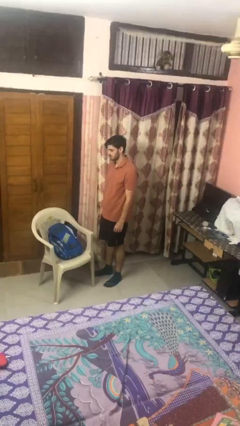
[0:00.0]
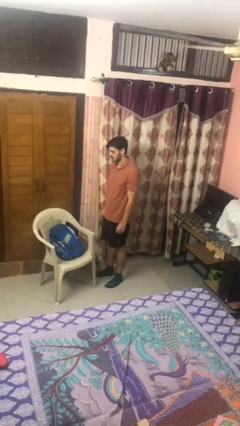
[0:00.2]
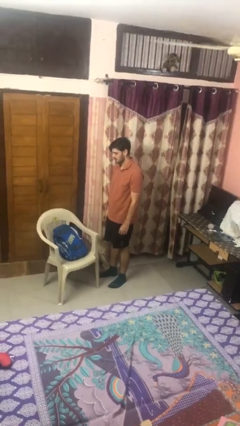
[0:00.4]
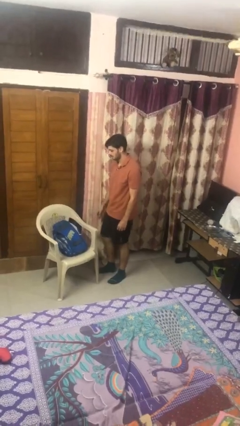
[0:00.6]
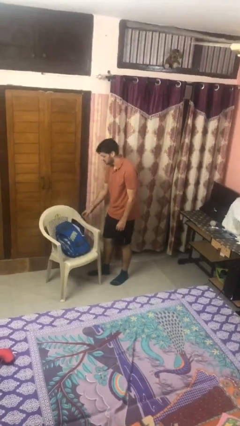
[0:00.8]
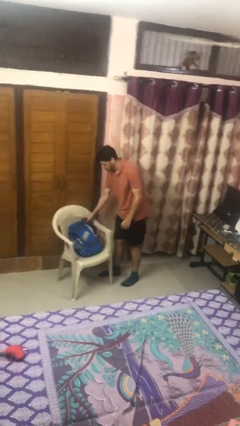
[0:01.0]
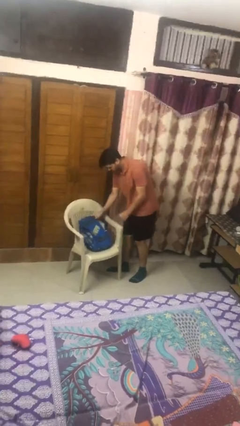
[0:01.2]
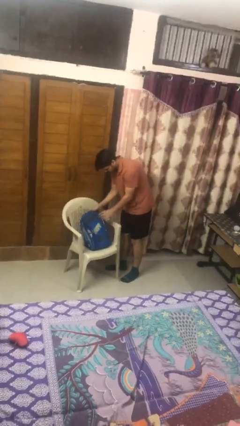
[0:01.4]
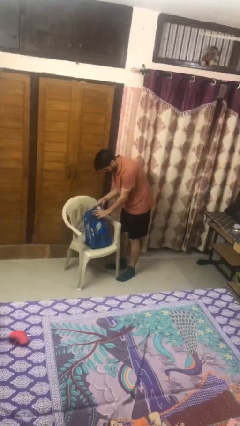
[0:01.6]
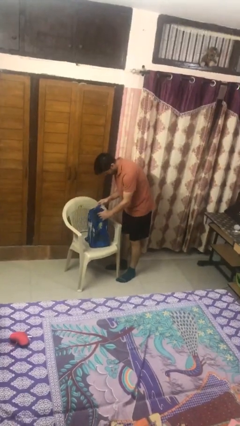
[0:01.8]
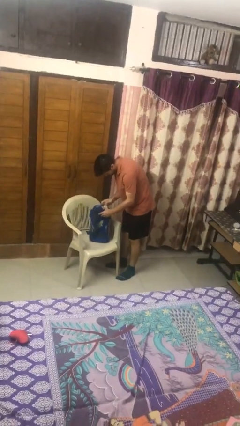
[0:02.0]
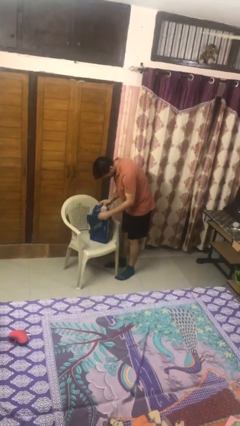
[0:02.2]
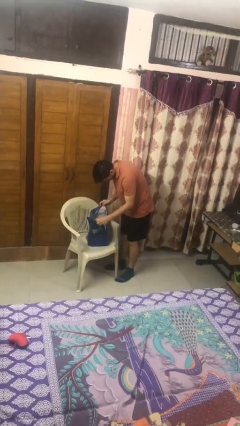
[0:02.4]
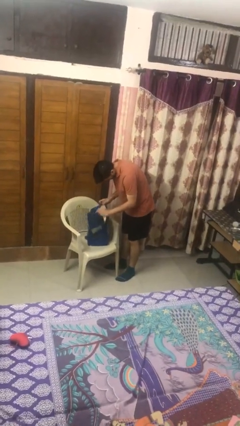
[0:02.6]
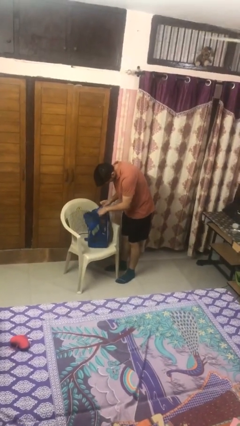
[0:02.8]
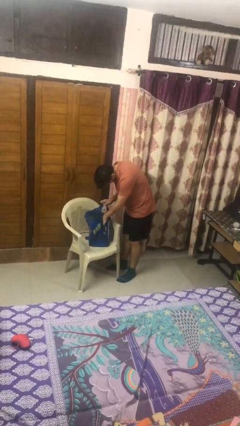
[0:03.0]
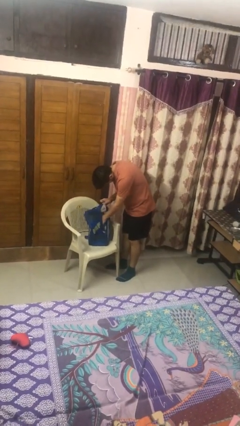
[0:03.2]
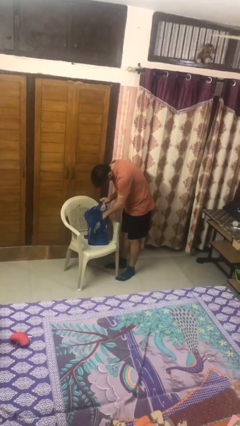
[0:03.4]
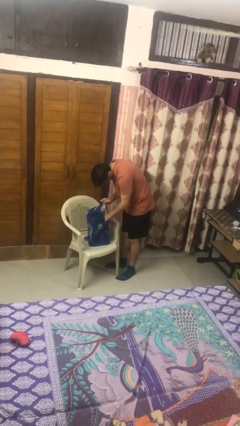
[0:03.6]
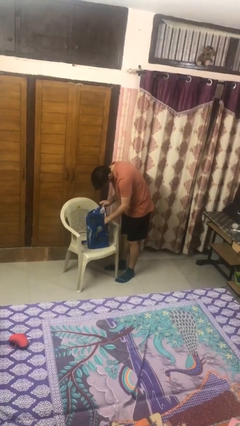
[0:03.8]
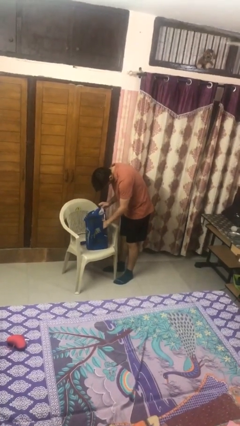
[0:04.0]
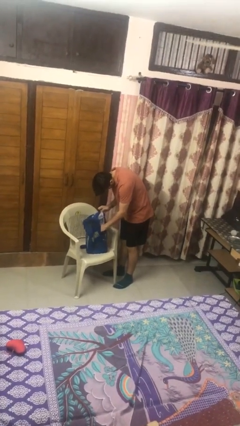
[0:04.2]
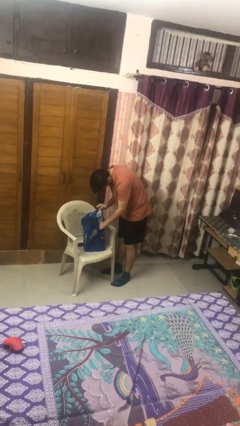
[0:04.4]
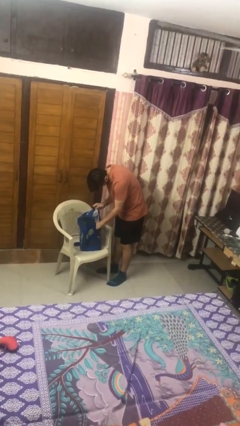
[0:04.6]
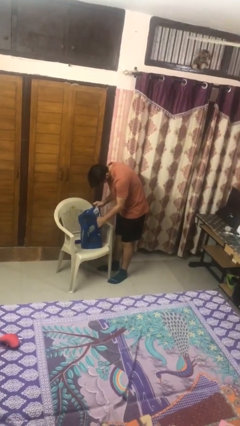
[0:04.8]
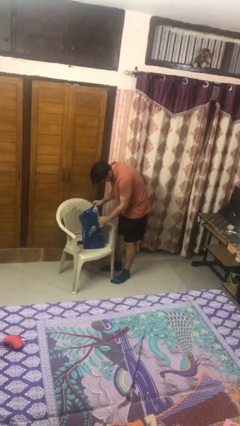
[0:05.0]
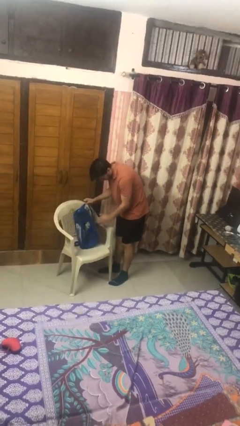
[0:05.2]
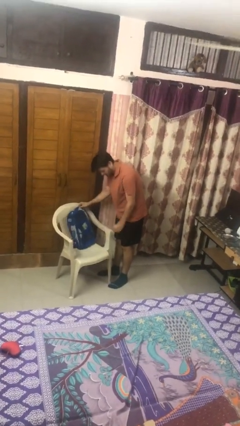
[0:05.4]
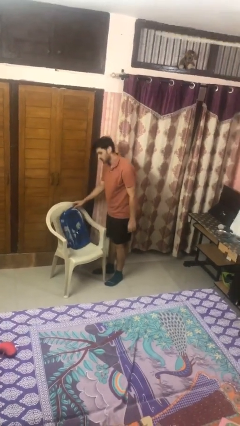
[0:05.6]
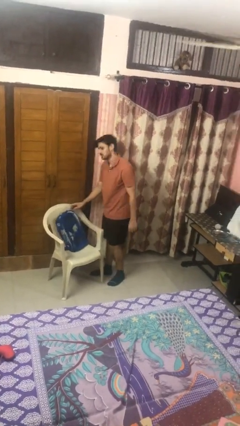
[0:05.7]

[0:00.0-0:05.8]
person searches in bag

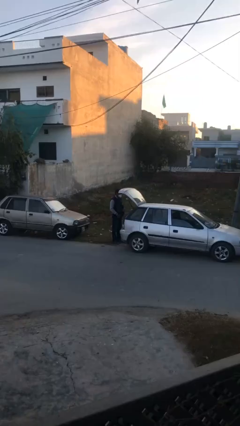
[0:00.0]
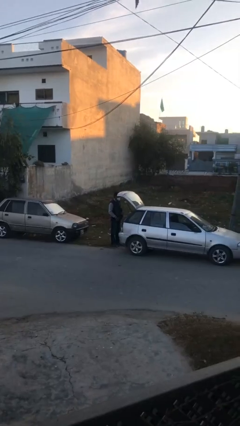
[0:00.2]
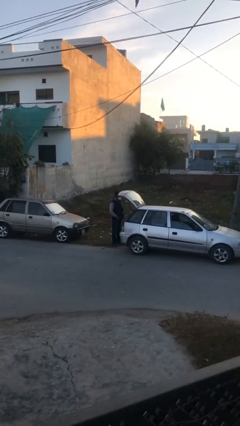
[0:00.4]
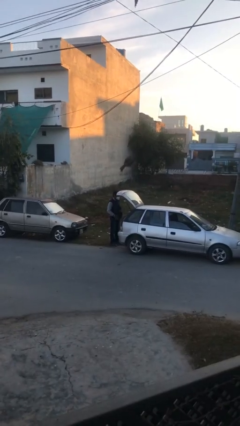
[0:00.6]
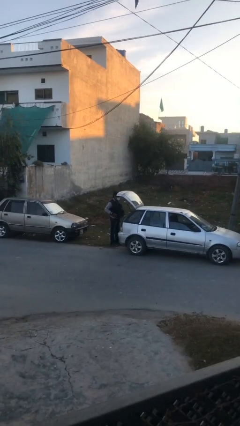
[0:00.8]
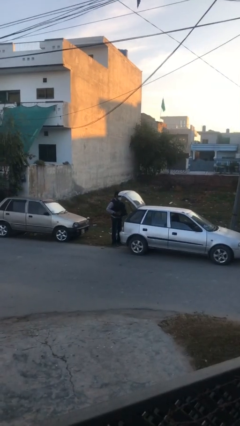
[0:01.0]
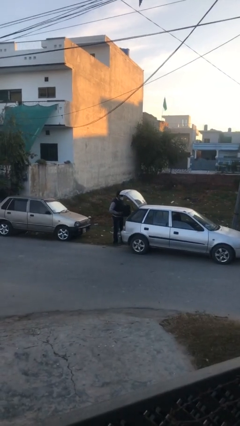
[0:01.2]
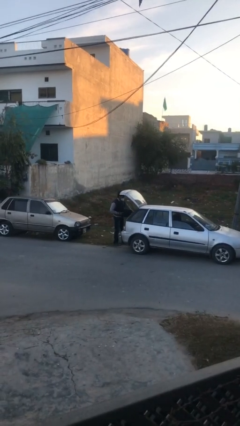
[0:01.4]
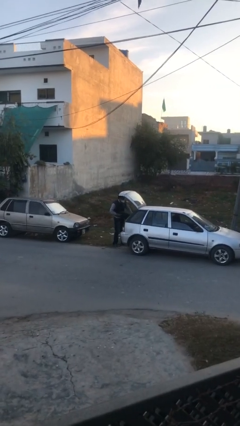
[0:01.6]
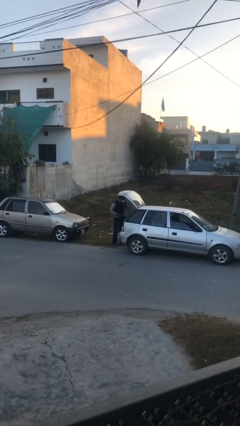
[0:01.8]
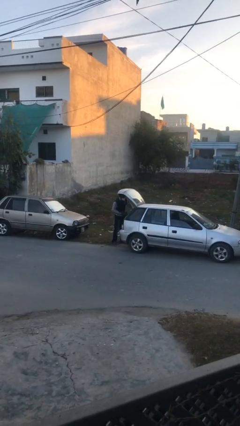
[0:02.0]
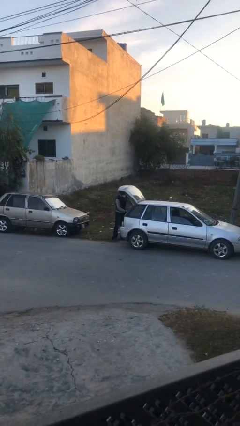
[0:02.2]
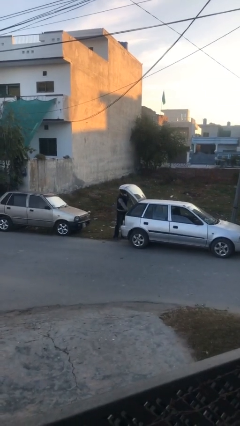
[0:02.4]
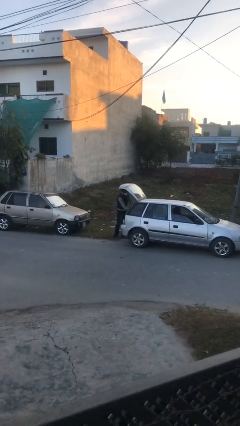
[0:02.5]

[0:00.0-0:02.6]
person loads car

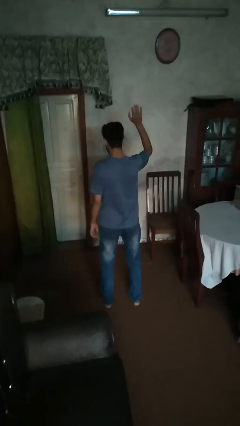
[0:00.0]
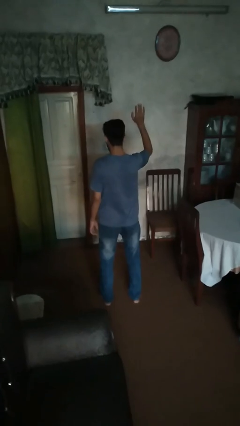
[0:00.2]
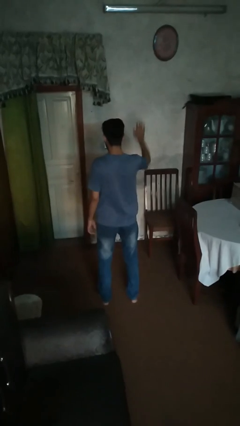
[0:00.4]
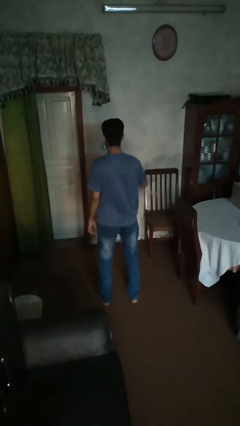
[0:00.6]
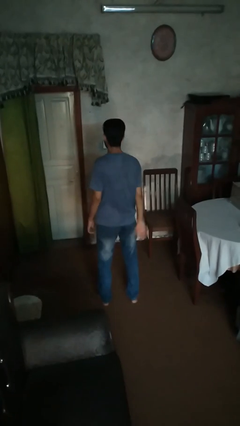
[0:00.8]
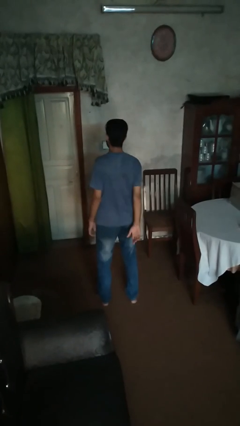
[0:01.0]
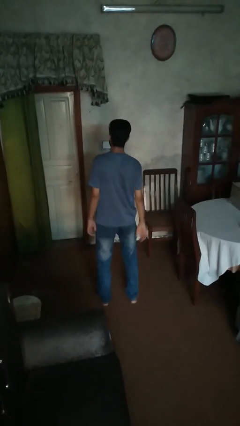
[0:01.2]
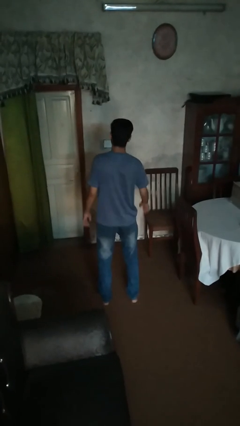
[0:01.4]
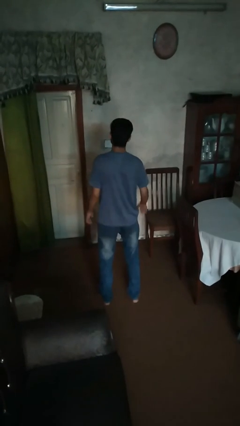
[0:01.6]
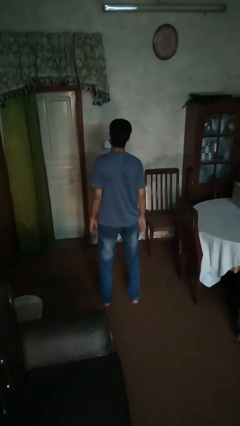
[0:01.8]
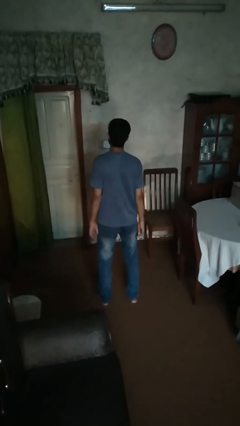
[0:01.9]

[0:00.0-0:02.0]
person gestures lower hand

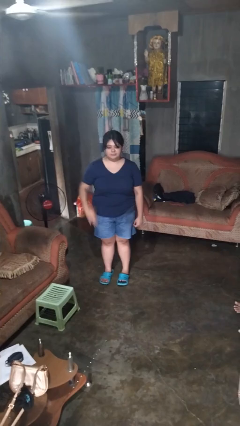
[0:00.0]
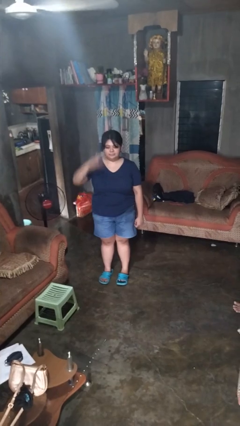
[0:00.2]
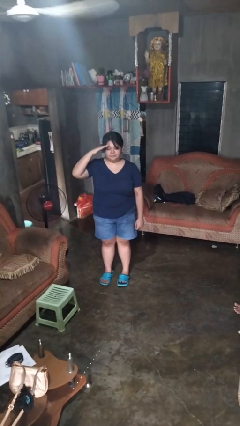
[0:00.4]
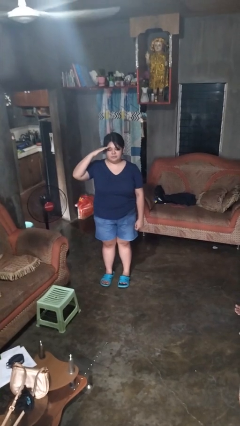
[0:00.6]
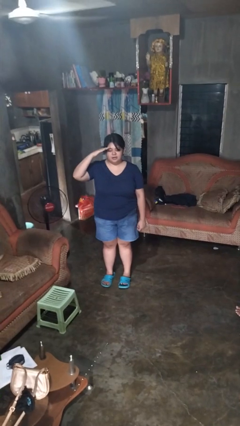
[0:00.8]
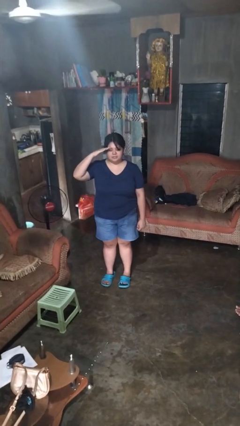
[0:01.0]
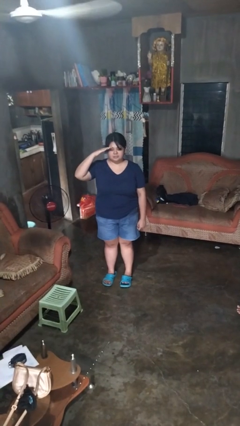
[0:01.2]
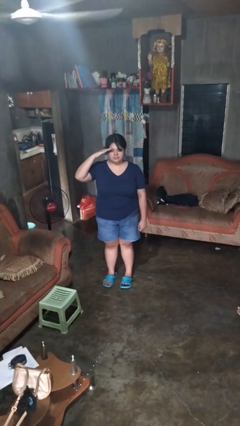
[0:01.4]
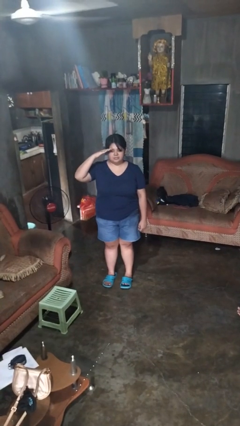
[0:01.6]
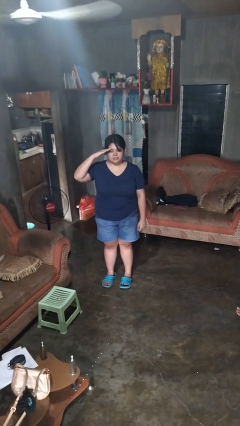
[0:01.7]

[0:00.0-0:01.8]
person salutes

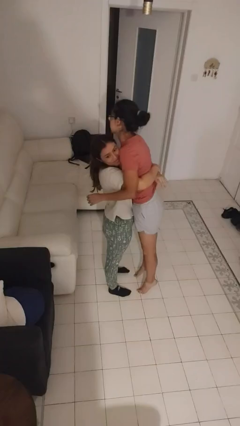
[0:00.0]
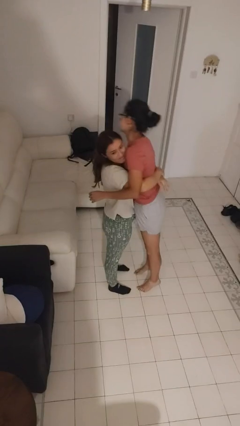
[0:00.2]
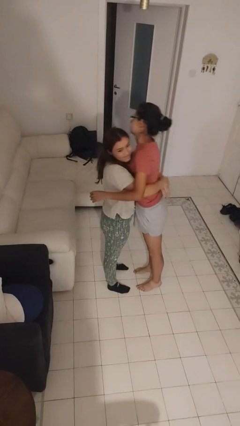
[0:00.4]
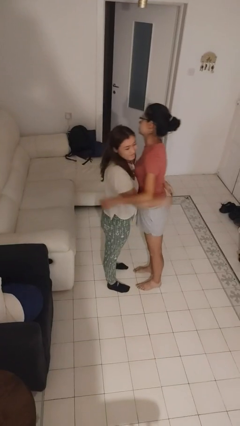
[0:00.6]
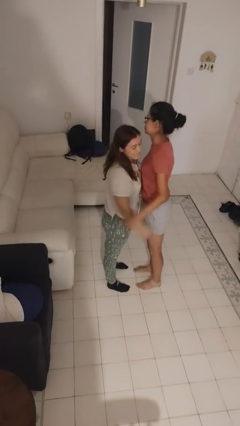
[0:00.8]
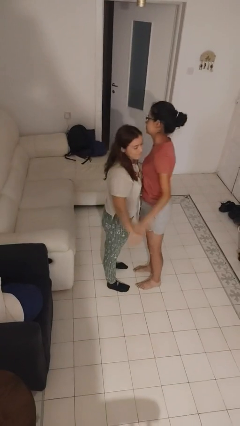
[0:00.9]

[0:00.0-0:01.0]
person puts down person

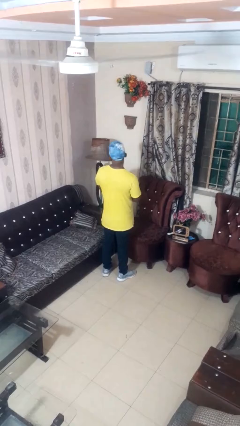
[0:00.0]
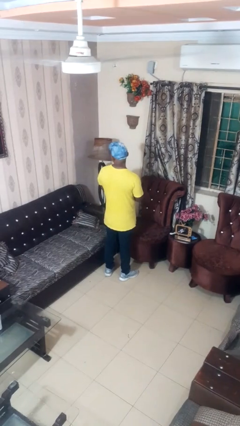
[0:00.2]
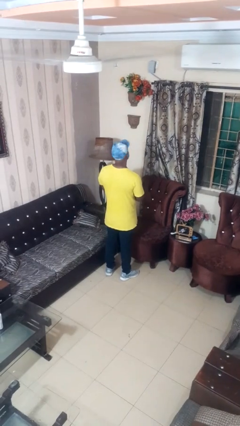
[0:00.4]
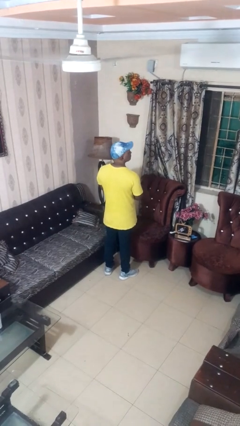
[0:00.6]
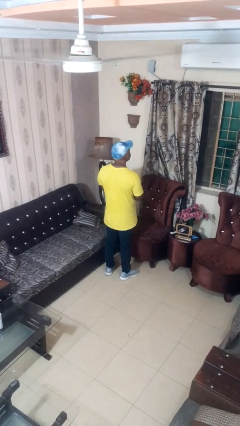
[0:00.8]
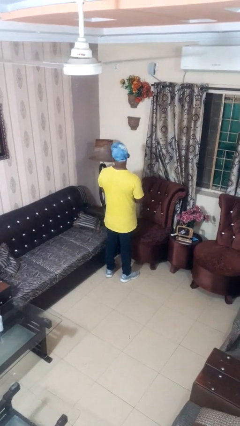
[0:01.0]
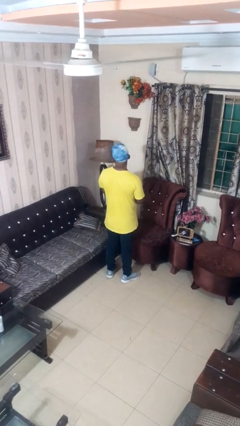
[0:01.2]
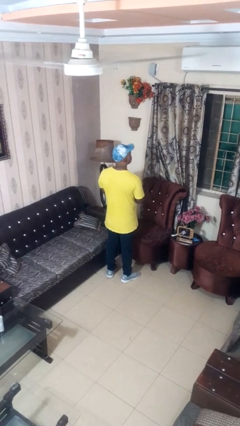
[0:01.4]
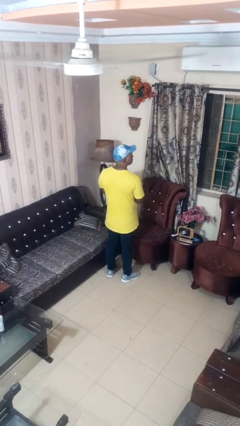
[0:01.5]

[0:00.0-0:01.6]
person nods head

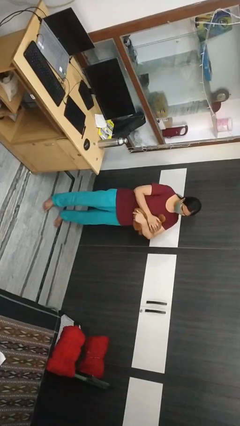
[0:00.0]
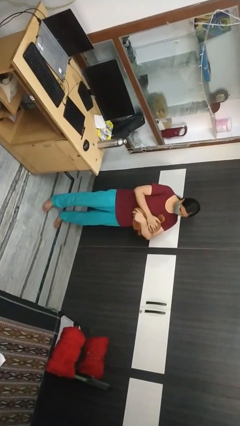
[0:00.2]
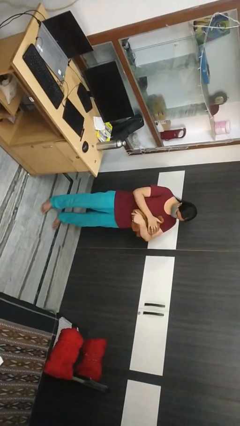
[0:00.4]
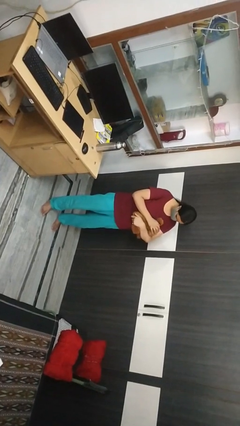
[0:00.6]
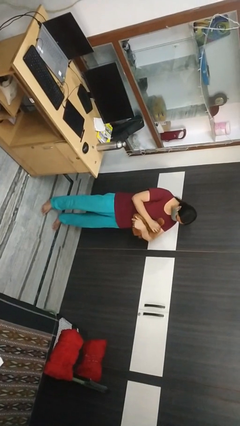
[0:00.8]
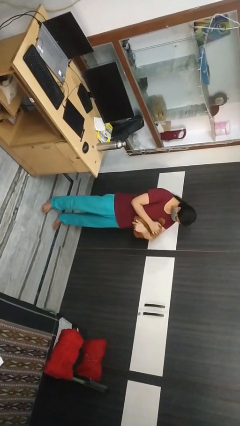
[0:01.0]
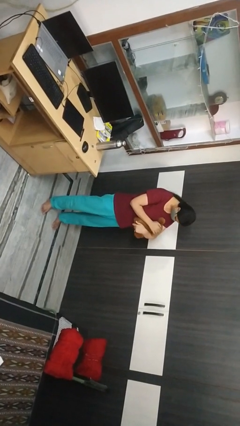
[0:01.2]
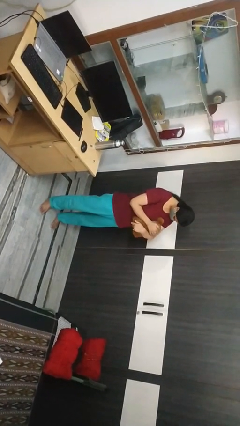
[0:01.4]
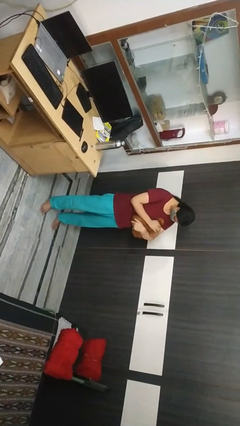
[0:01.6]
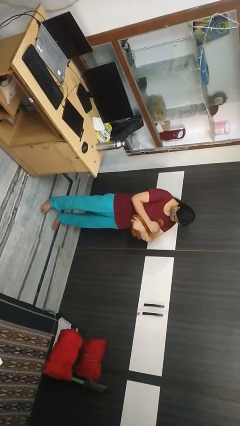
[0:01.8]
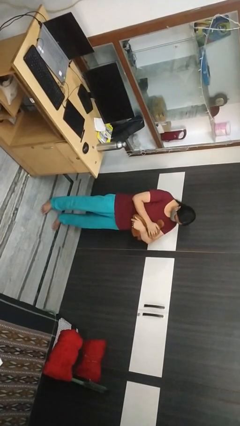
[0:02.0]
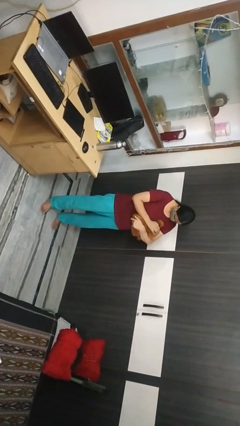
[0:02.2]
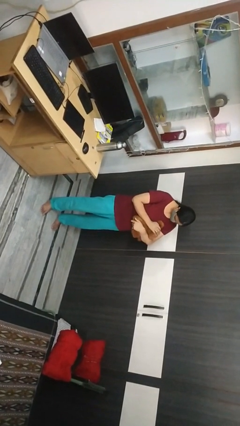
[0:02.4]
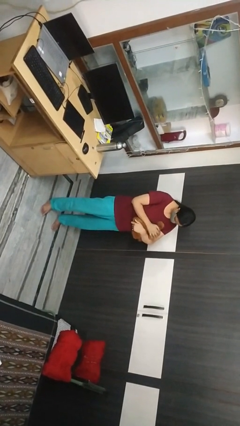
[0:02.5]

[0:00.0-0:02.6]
person pets cat
